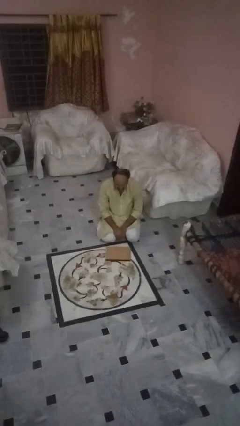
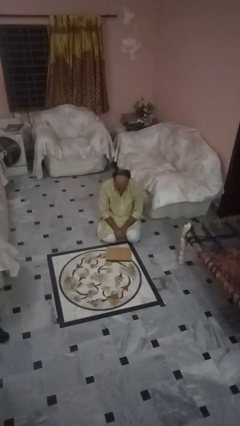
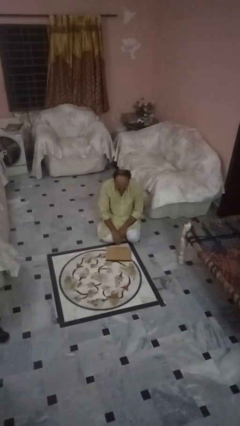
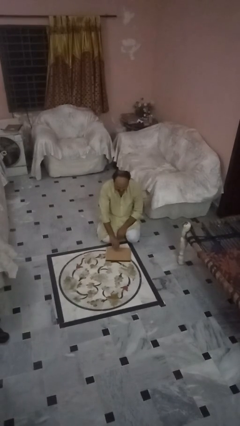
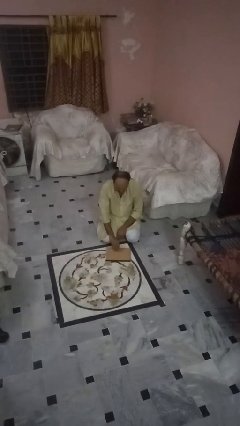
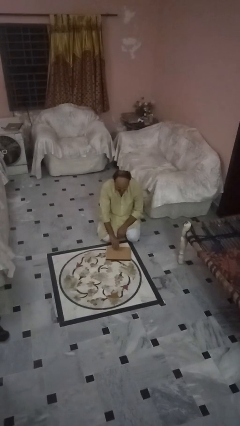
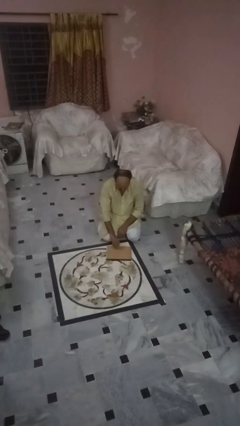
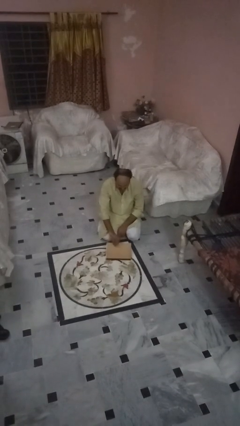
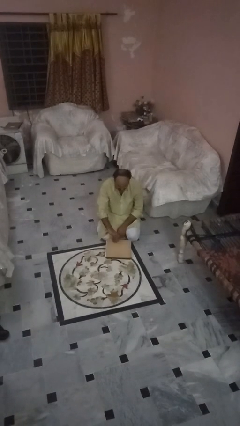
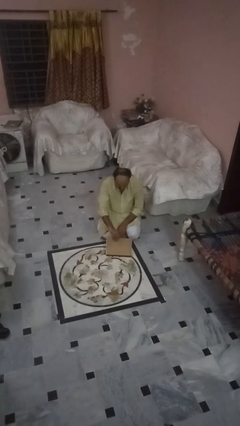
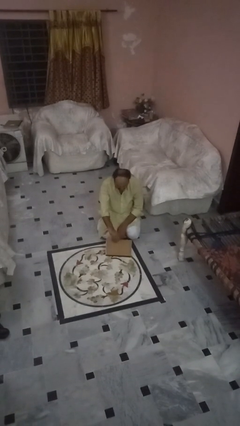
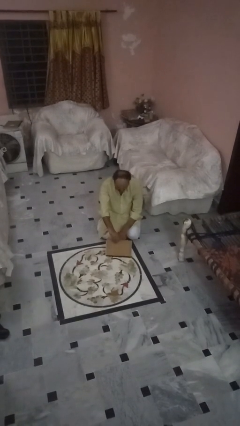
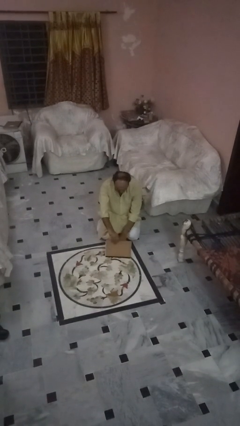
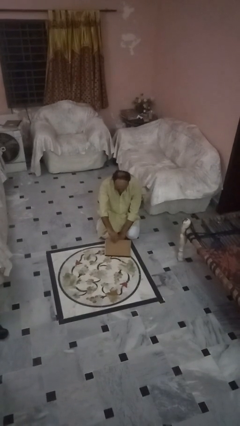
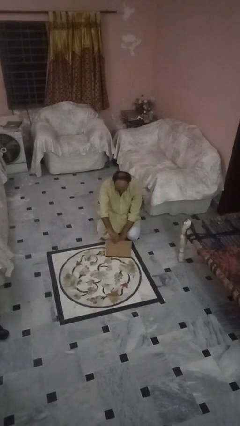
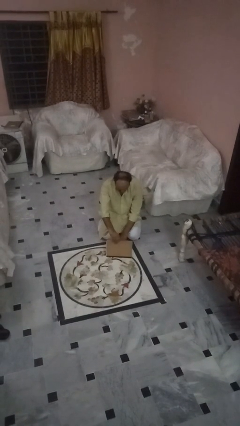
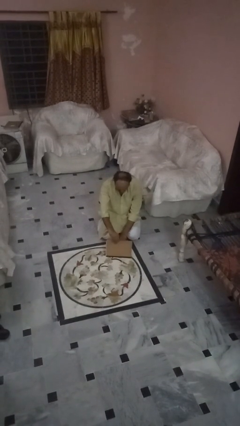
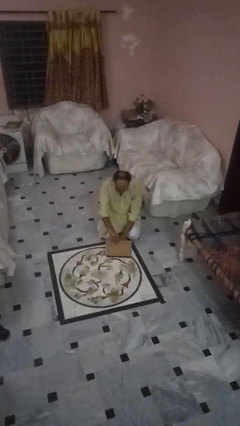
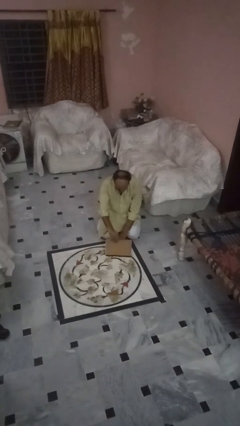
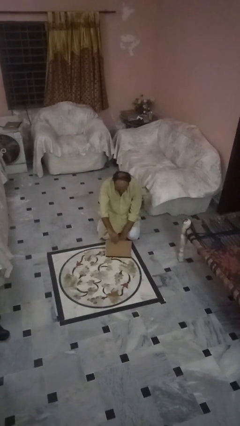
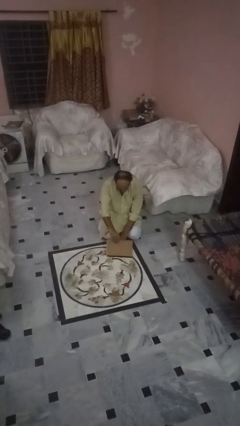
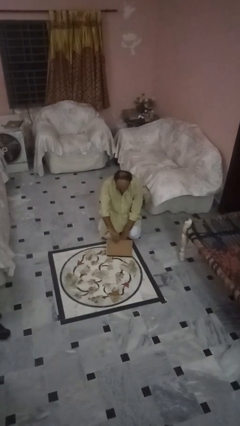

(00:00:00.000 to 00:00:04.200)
person opens laptop

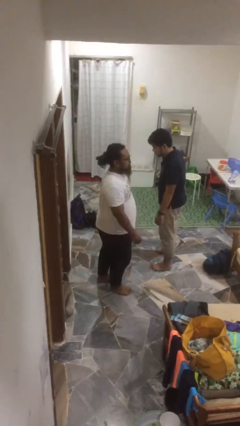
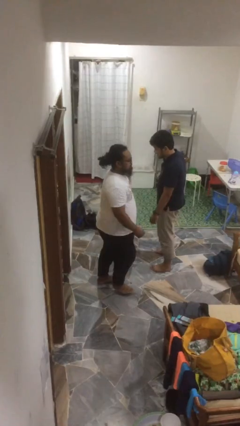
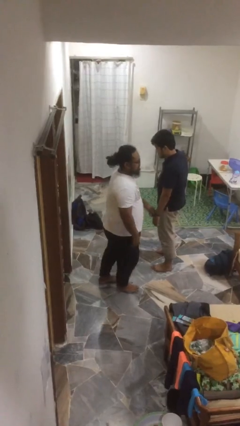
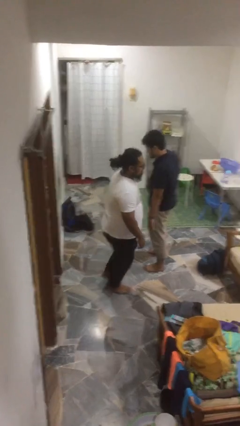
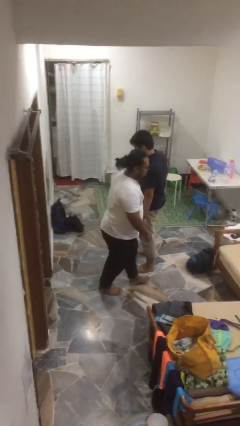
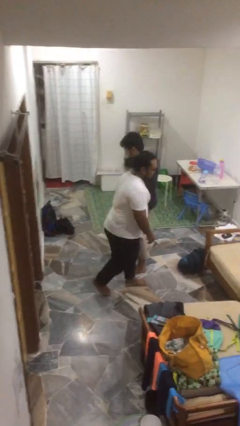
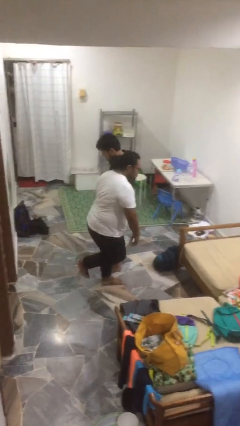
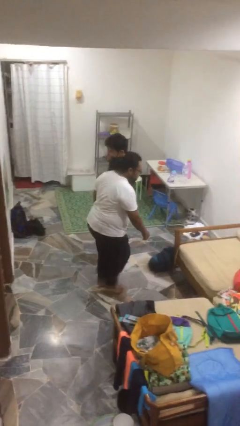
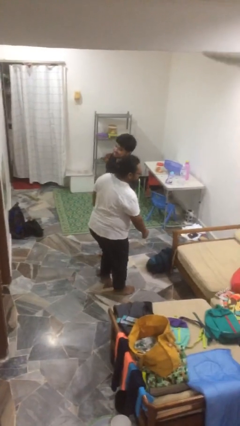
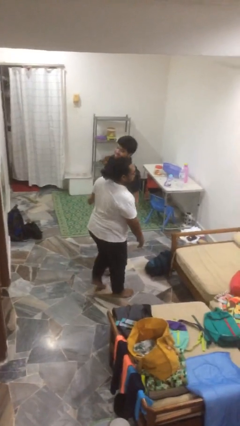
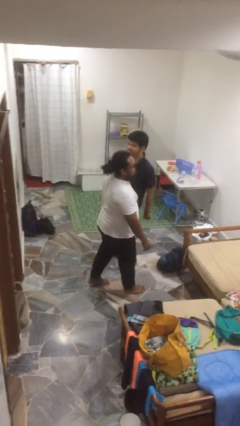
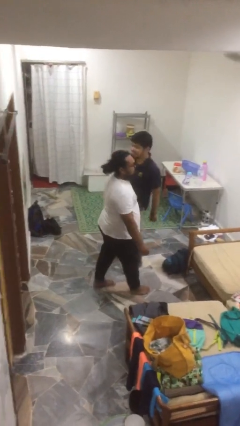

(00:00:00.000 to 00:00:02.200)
person bumps into person

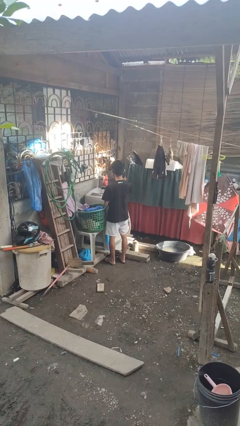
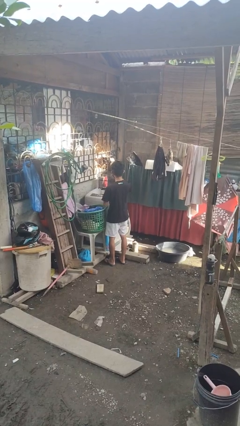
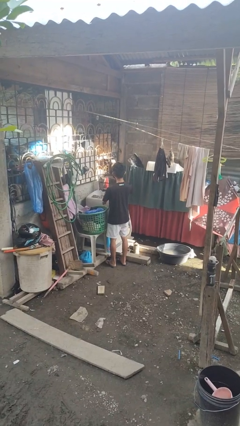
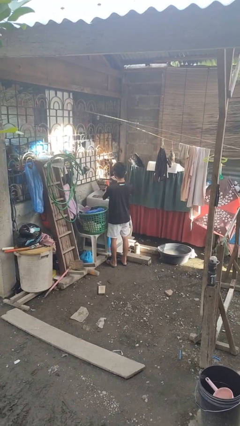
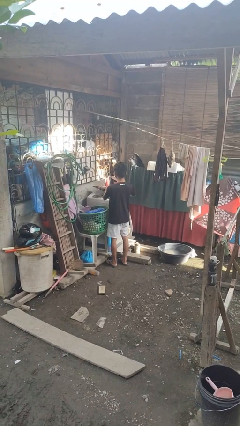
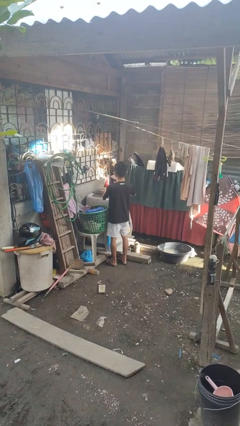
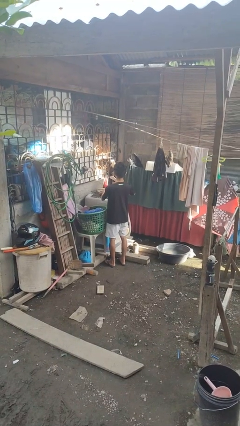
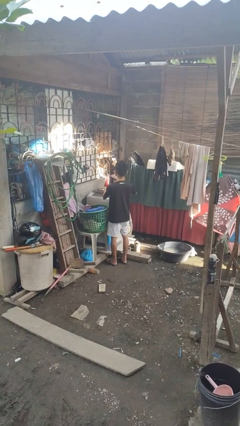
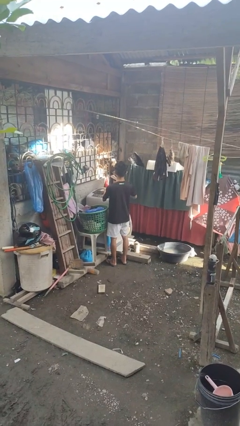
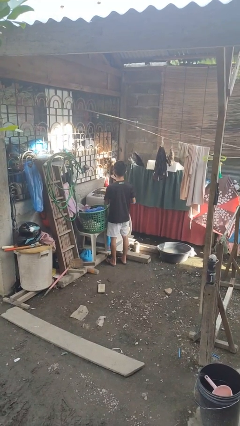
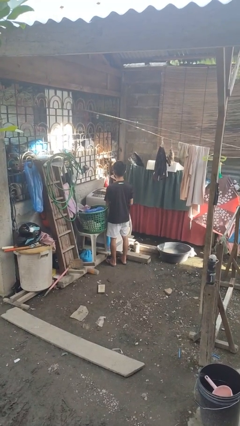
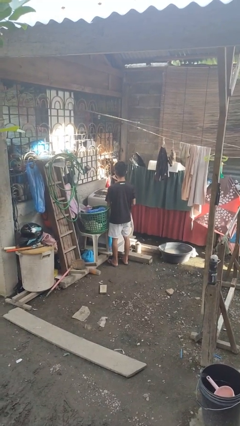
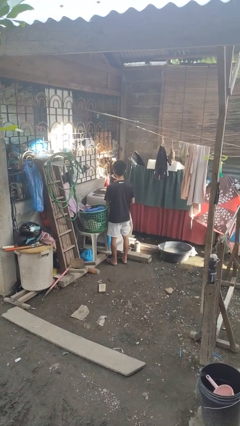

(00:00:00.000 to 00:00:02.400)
person closes clothes washer

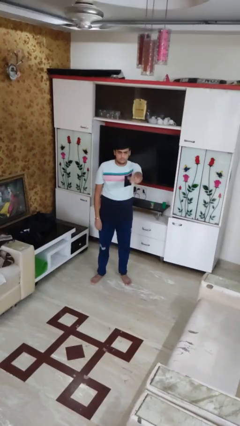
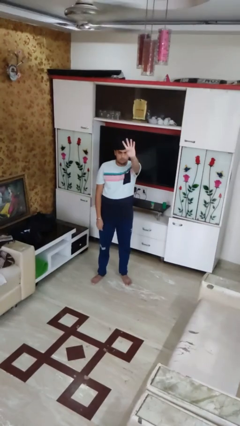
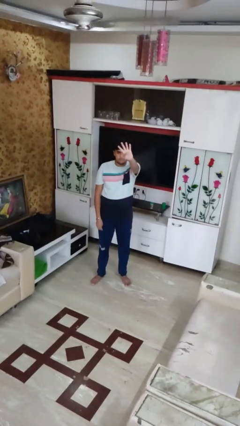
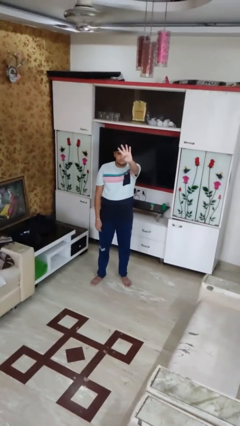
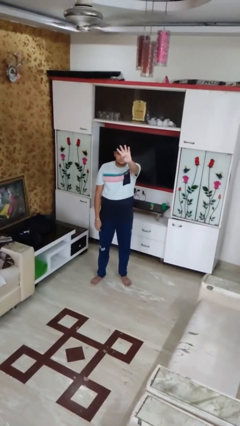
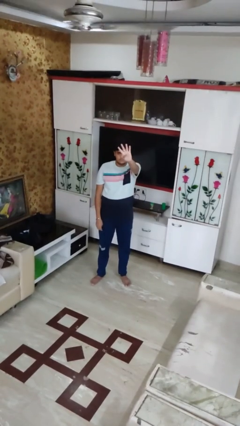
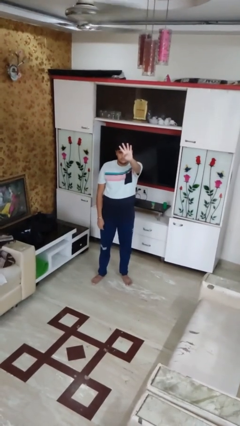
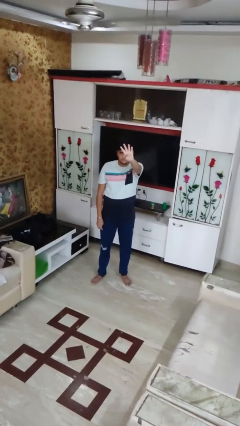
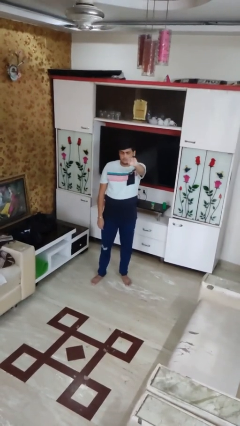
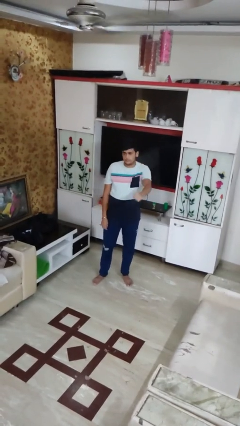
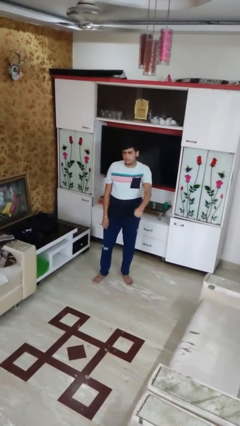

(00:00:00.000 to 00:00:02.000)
person gestures number four

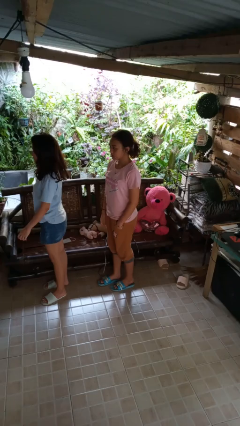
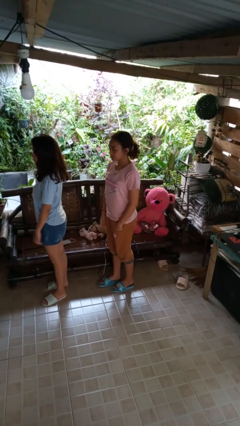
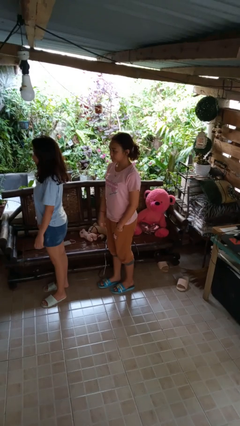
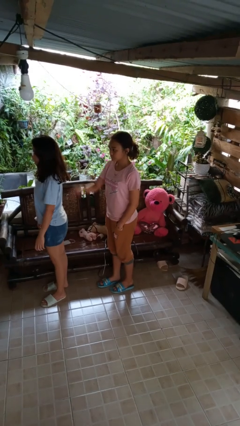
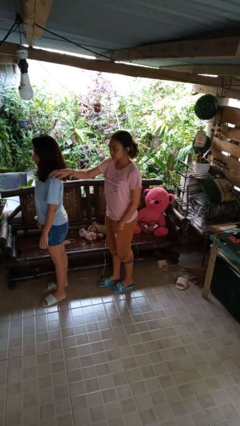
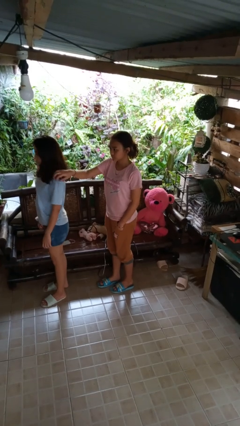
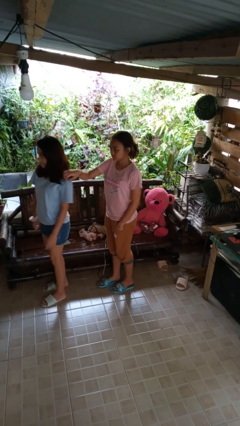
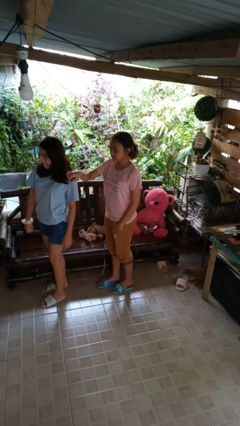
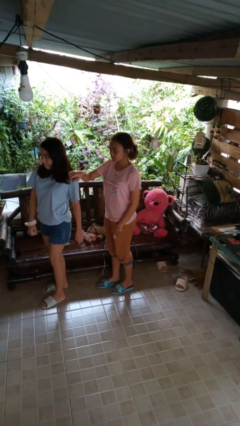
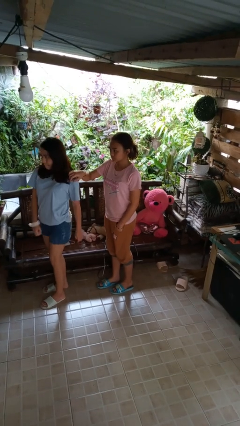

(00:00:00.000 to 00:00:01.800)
person grabs person by shoulder

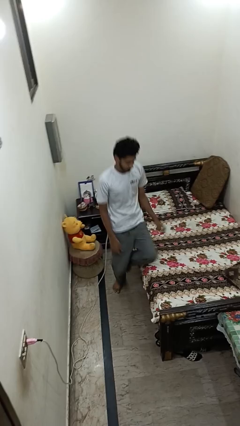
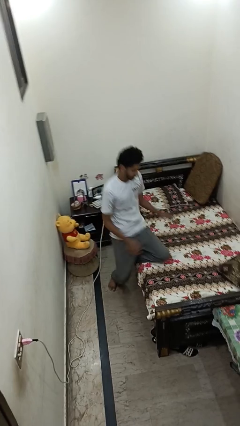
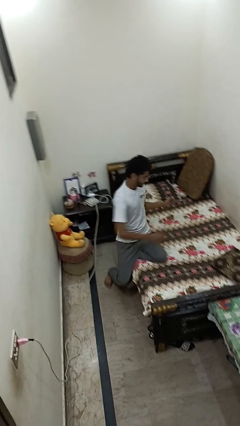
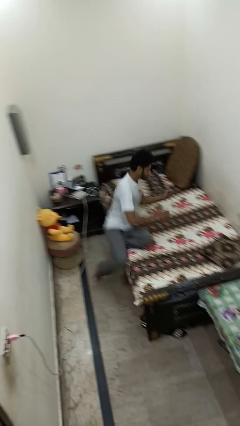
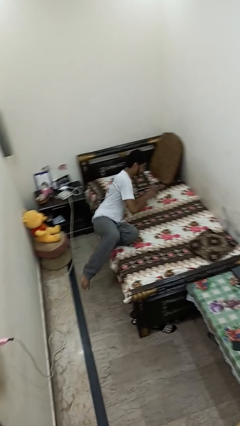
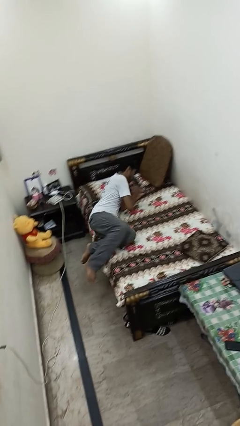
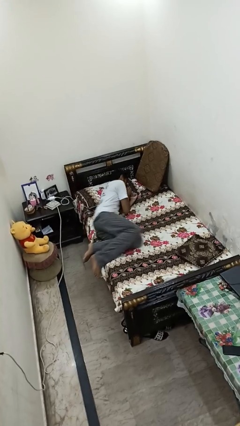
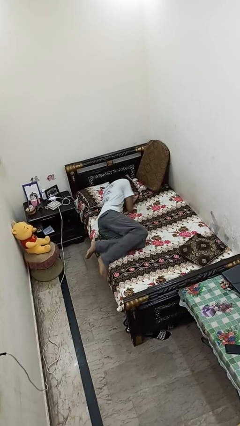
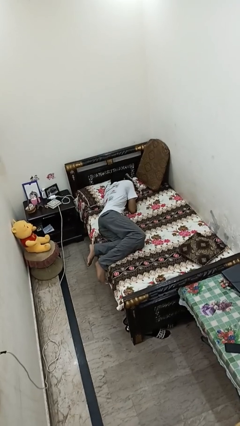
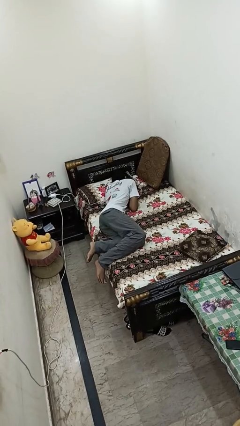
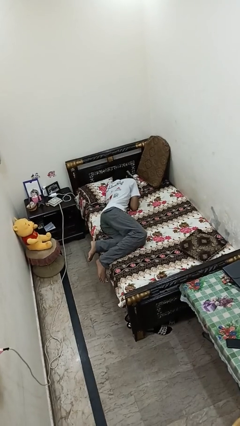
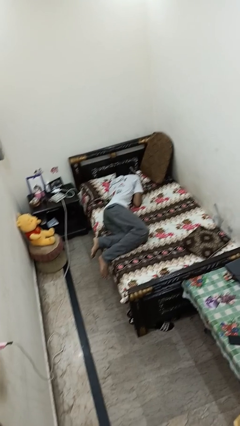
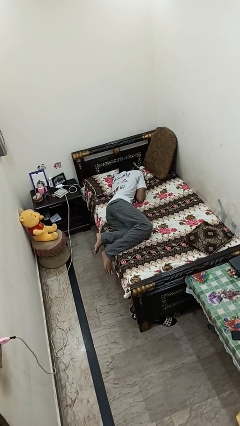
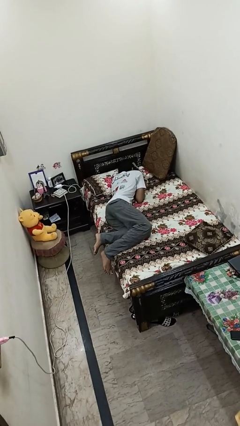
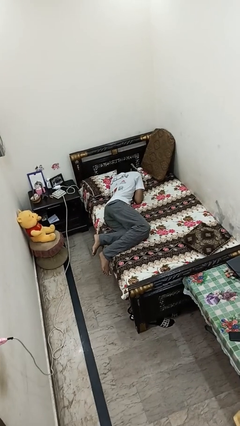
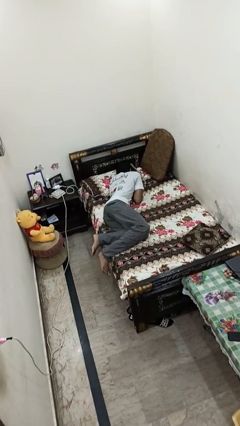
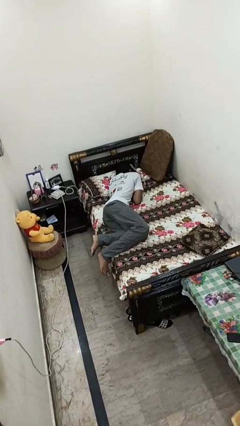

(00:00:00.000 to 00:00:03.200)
person lies down on bed

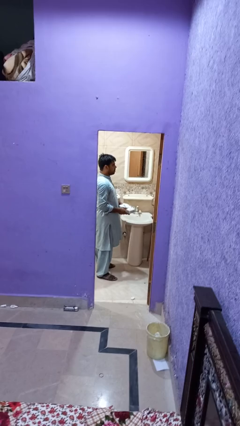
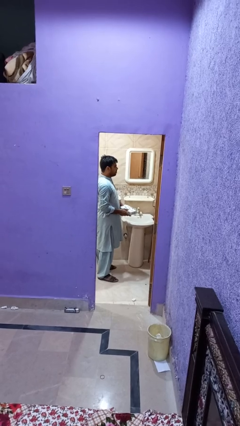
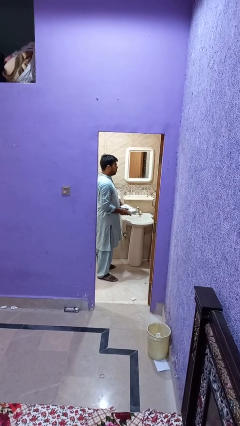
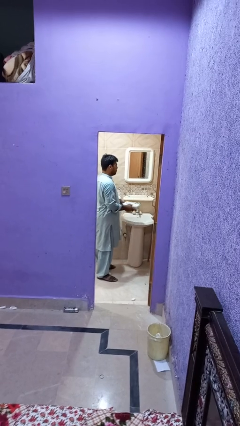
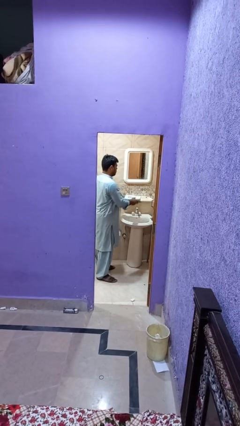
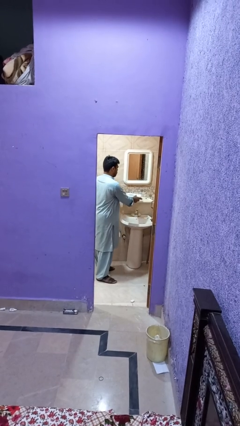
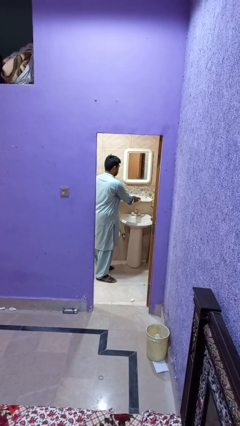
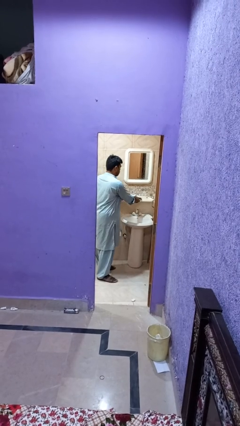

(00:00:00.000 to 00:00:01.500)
person puts down object on countertop
